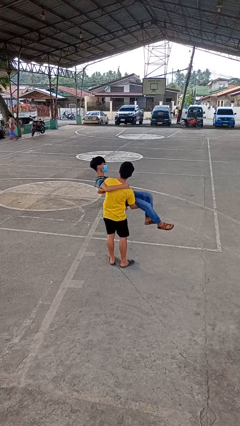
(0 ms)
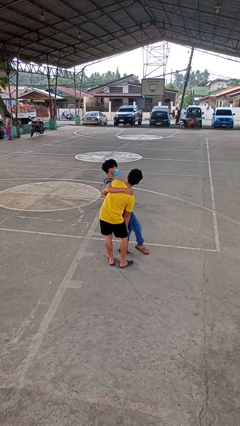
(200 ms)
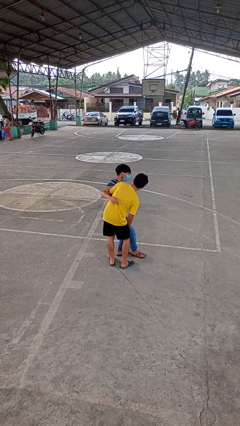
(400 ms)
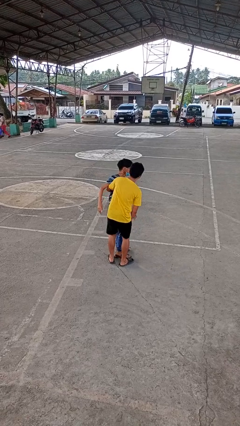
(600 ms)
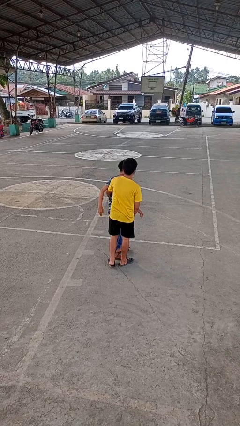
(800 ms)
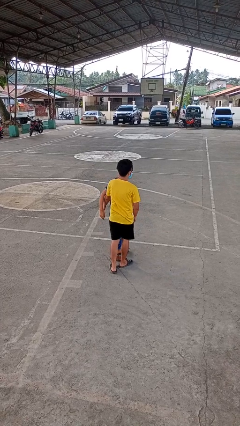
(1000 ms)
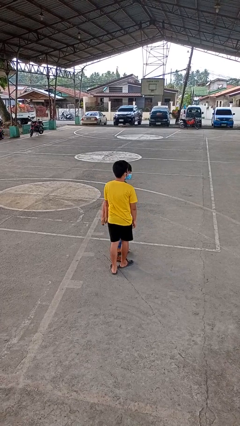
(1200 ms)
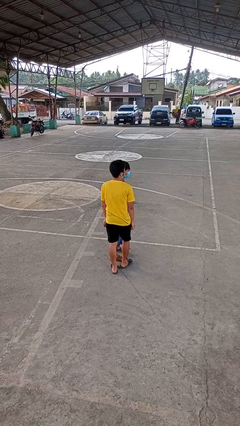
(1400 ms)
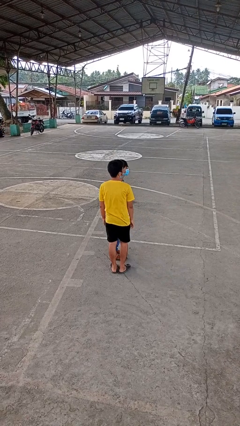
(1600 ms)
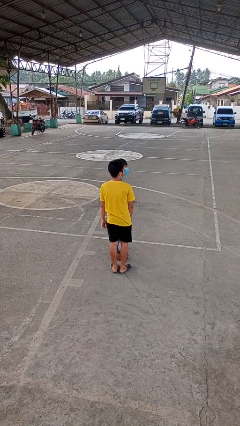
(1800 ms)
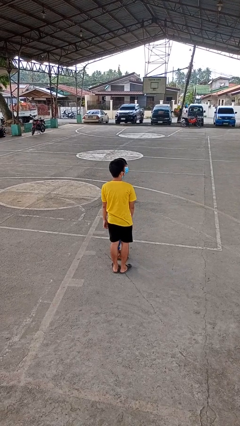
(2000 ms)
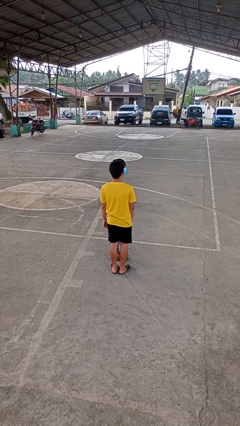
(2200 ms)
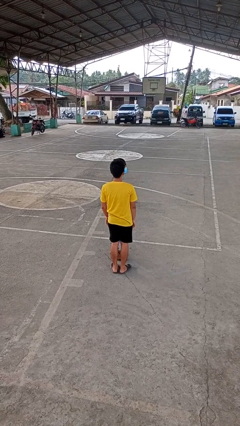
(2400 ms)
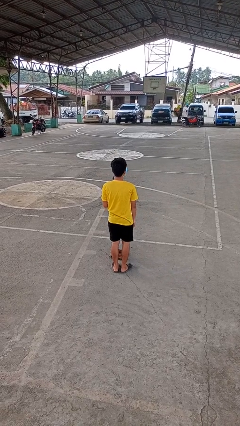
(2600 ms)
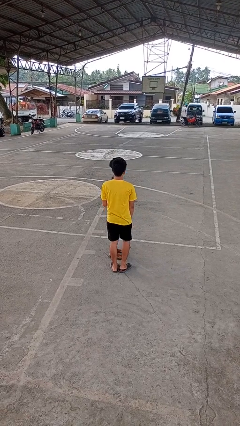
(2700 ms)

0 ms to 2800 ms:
person puts down person

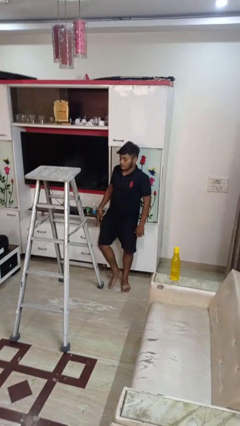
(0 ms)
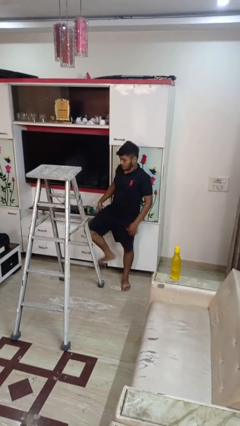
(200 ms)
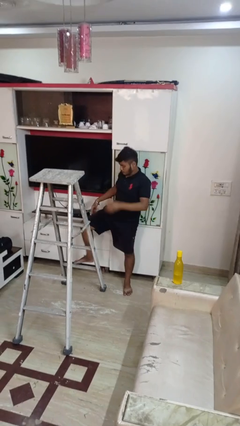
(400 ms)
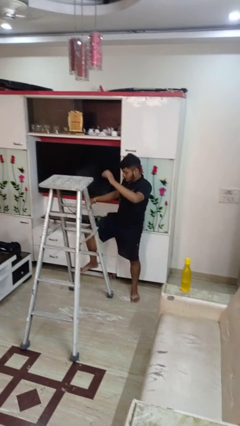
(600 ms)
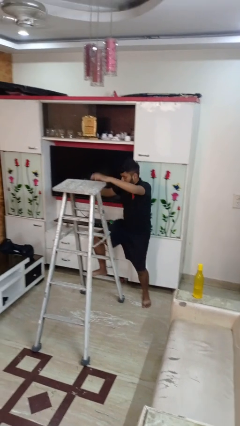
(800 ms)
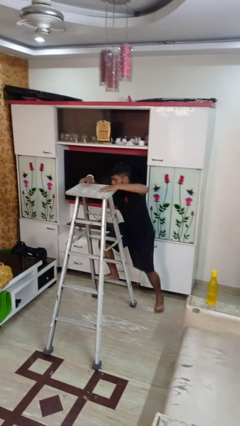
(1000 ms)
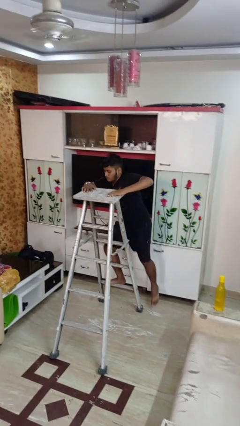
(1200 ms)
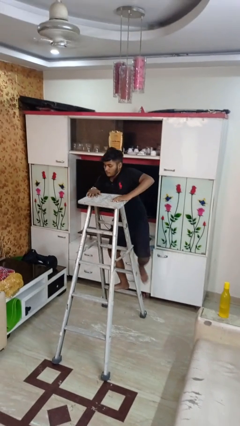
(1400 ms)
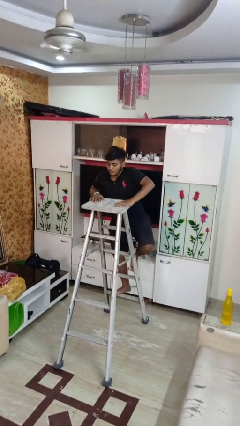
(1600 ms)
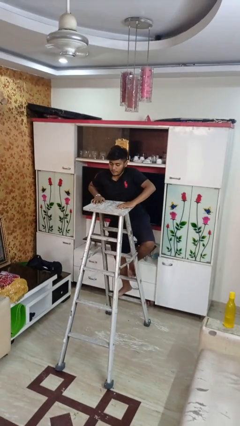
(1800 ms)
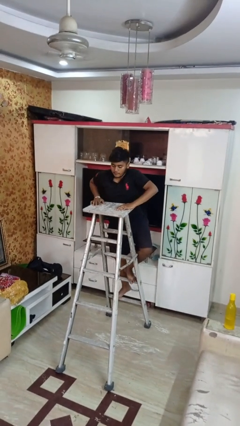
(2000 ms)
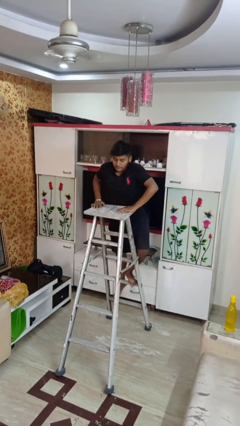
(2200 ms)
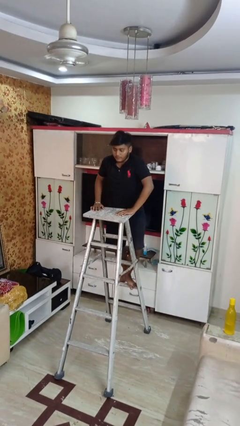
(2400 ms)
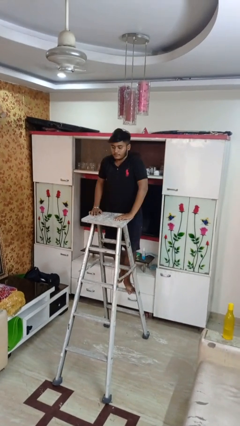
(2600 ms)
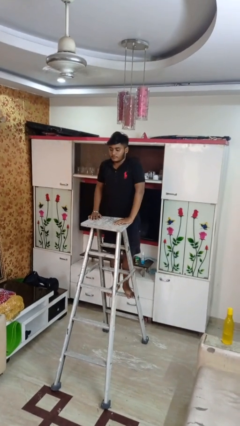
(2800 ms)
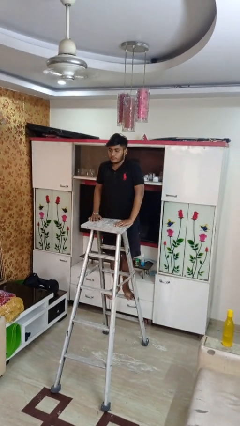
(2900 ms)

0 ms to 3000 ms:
person climbs up ladder

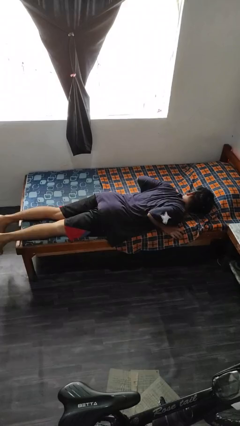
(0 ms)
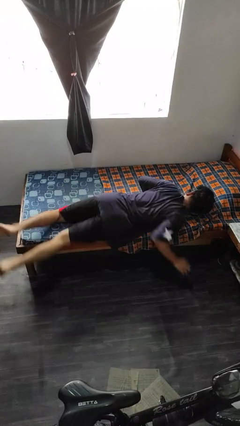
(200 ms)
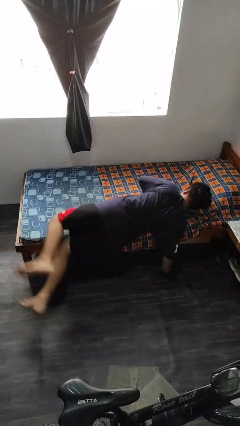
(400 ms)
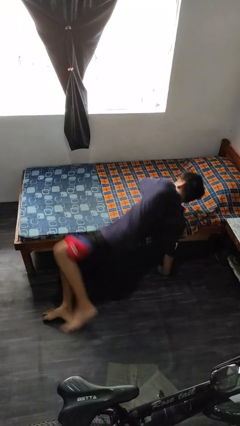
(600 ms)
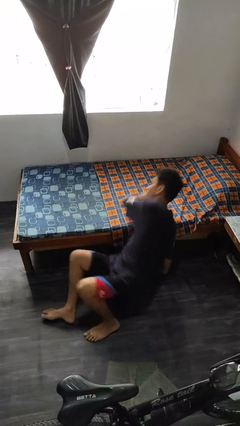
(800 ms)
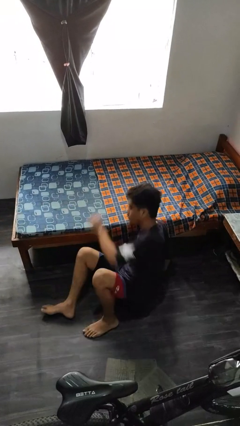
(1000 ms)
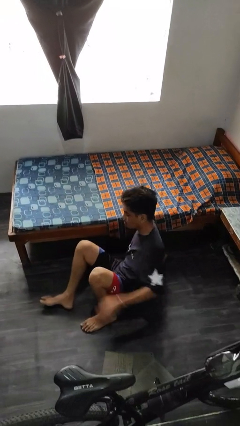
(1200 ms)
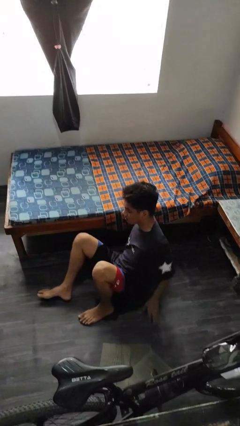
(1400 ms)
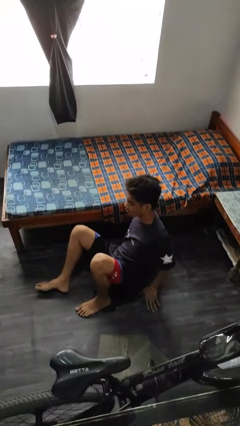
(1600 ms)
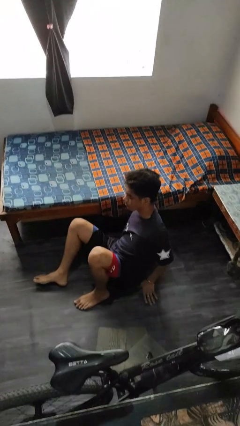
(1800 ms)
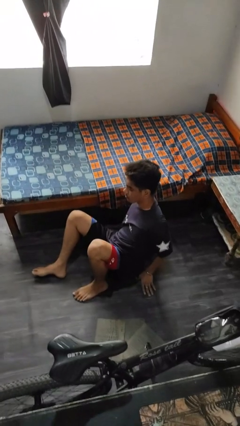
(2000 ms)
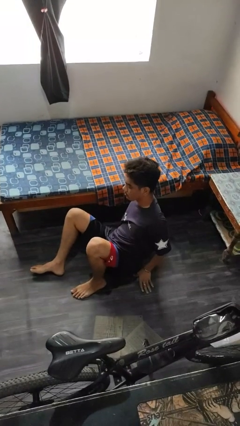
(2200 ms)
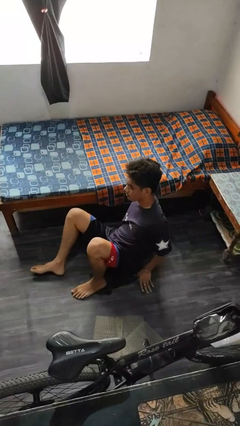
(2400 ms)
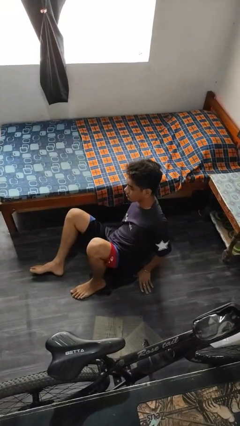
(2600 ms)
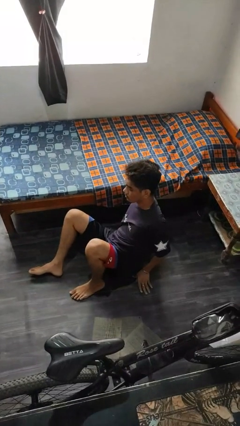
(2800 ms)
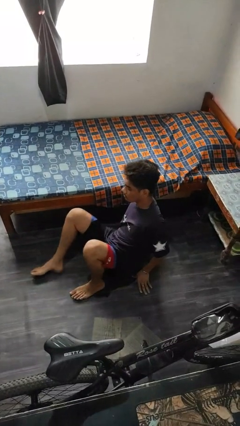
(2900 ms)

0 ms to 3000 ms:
person falls from bed

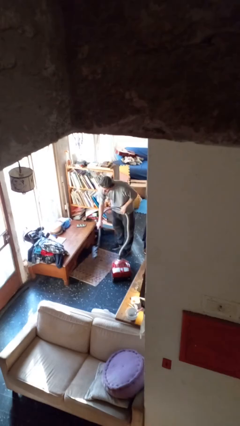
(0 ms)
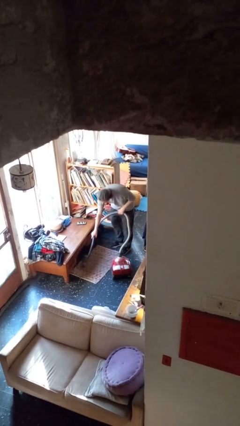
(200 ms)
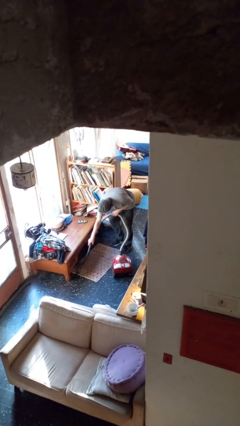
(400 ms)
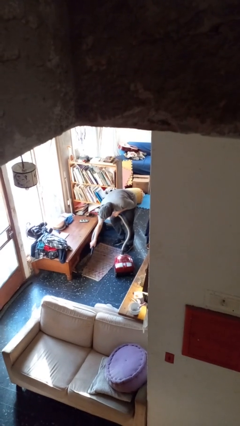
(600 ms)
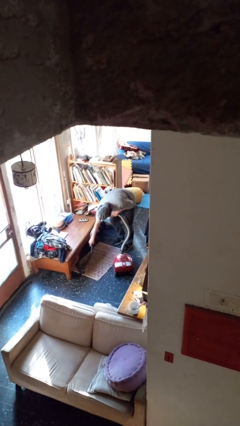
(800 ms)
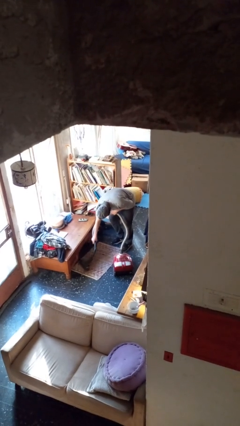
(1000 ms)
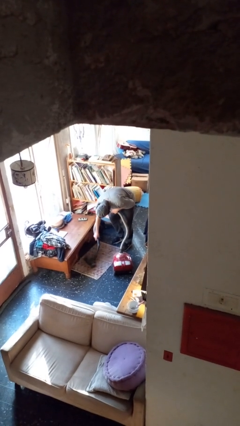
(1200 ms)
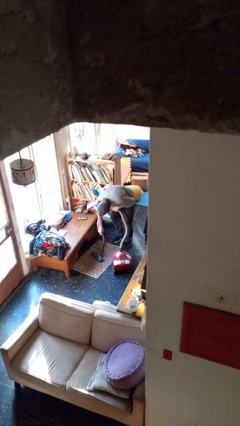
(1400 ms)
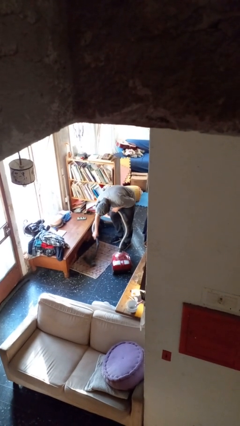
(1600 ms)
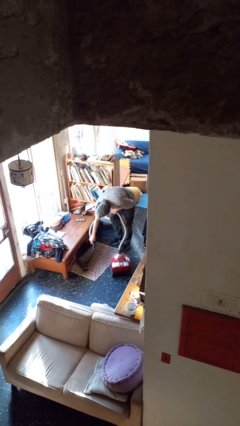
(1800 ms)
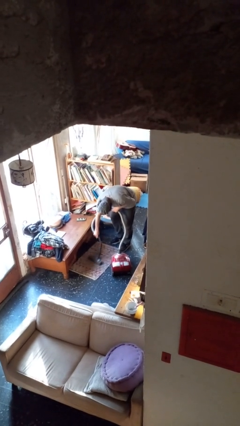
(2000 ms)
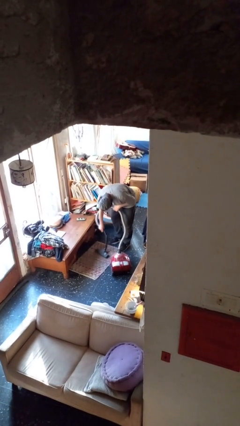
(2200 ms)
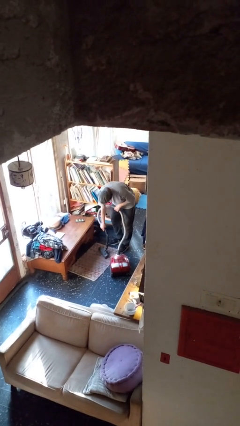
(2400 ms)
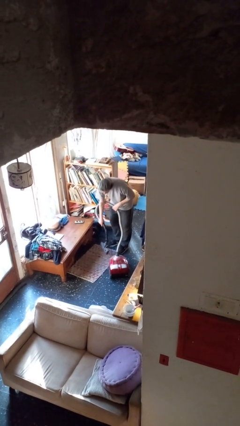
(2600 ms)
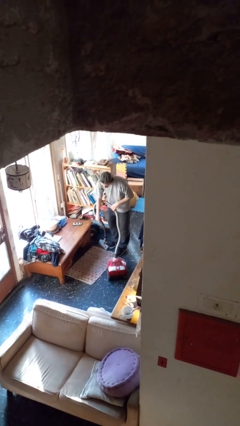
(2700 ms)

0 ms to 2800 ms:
person vacuums carpet

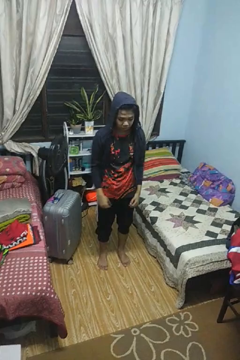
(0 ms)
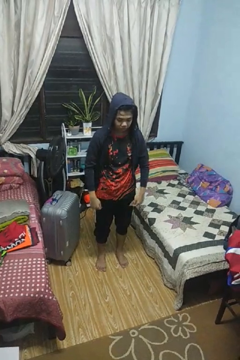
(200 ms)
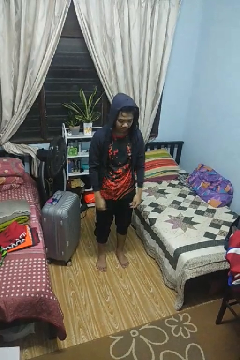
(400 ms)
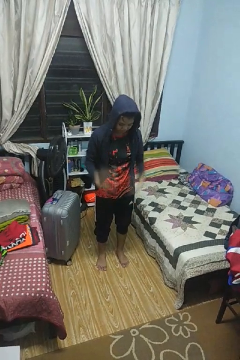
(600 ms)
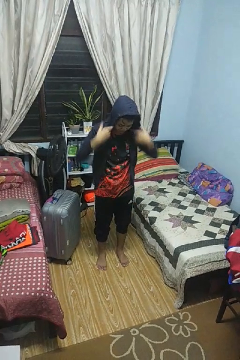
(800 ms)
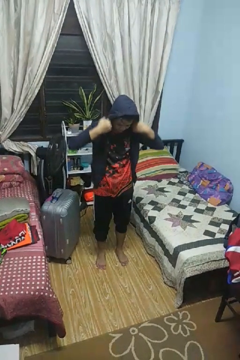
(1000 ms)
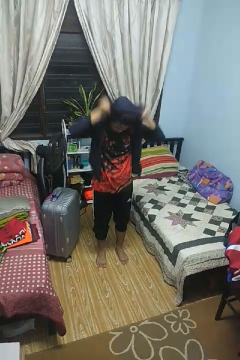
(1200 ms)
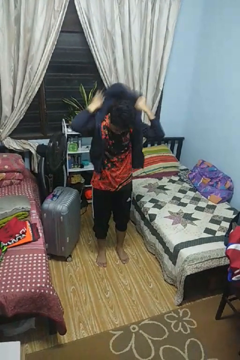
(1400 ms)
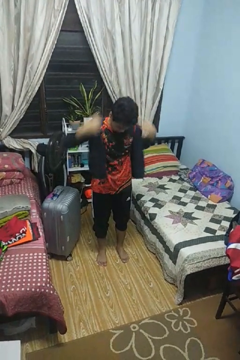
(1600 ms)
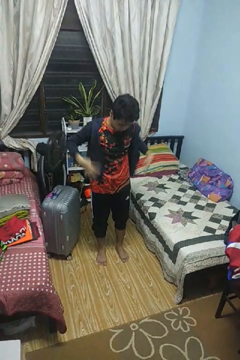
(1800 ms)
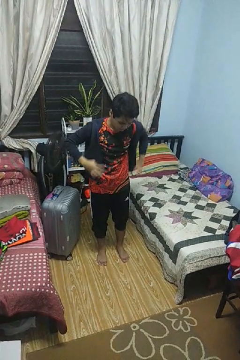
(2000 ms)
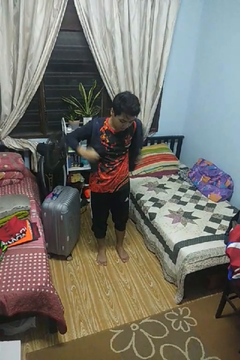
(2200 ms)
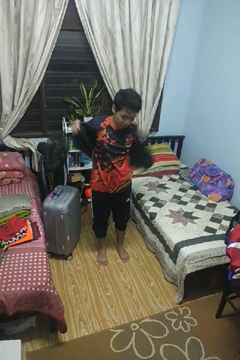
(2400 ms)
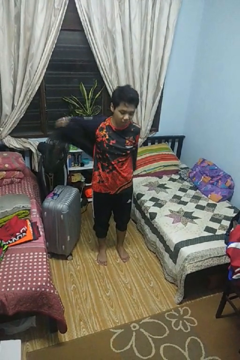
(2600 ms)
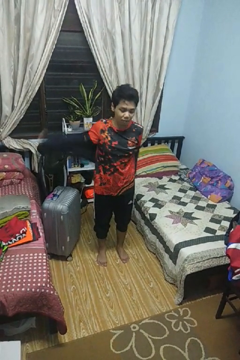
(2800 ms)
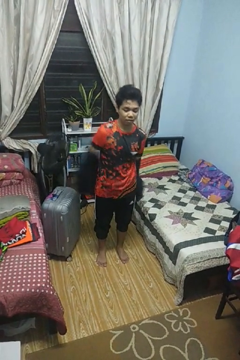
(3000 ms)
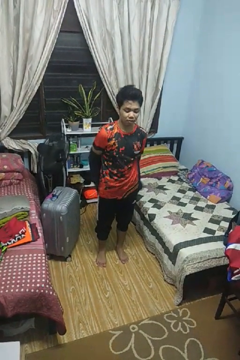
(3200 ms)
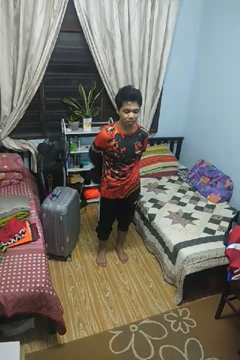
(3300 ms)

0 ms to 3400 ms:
person takes off hoodie

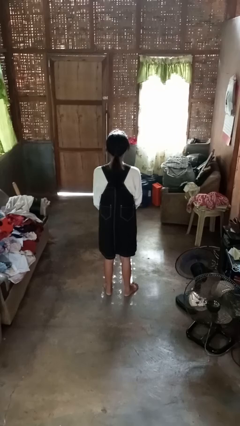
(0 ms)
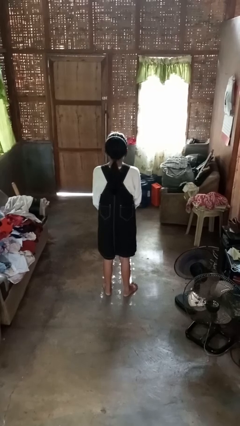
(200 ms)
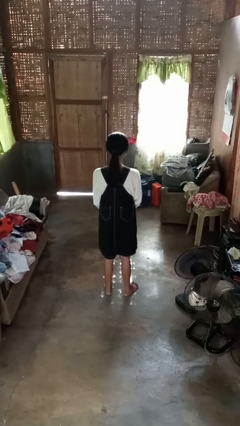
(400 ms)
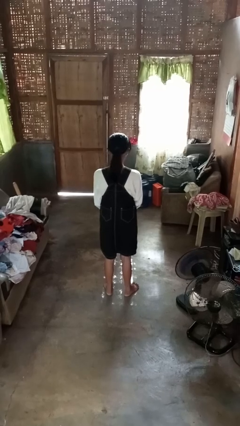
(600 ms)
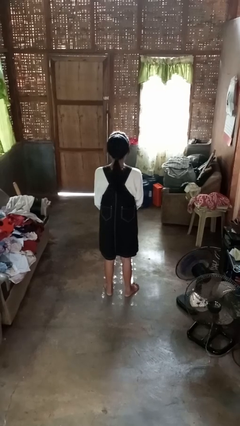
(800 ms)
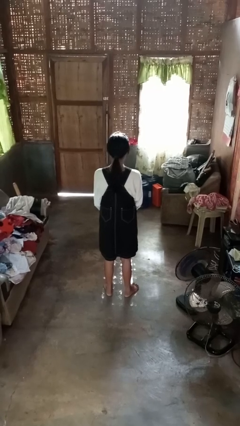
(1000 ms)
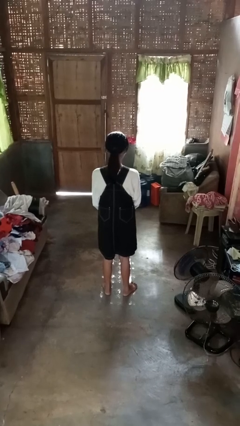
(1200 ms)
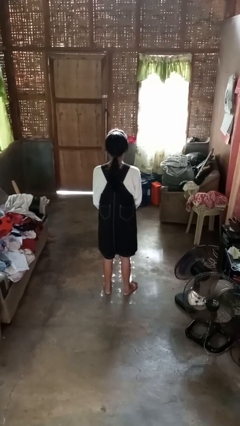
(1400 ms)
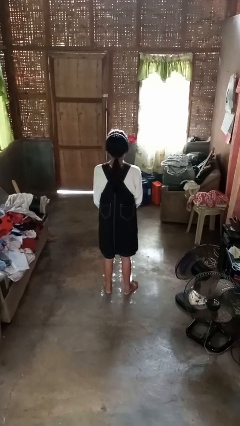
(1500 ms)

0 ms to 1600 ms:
person nods head

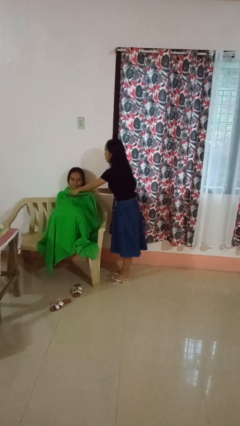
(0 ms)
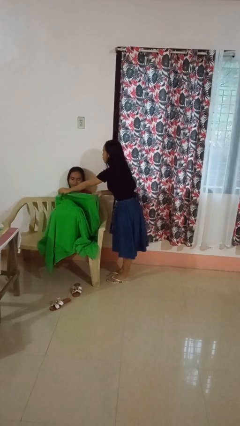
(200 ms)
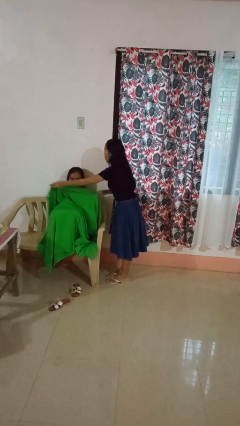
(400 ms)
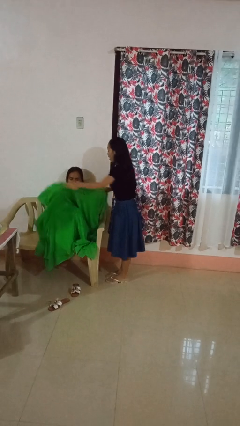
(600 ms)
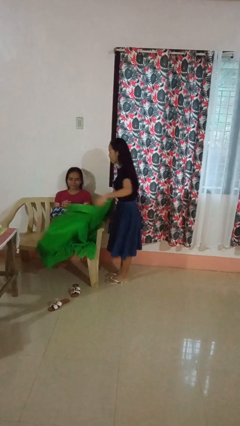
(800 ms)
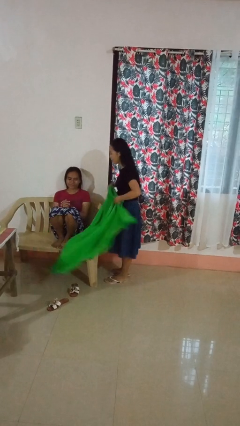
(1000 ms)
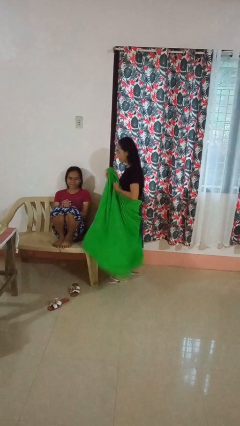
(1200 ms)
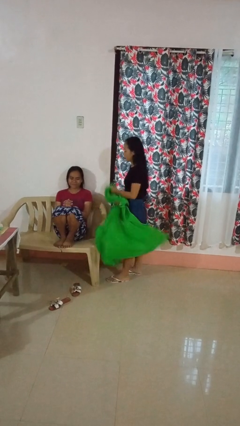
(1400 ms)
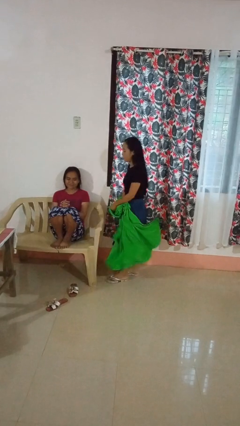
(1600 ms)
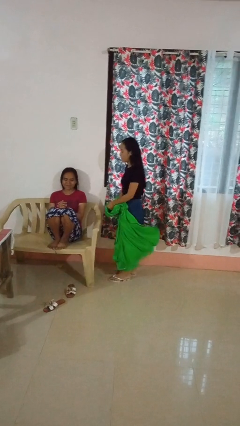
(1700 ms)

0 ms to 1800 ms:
person uncovers friend with blanket
